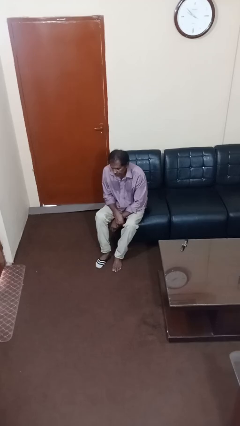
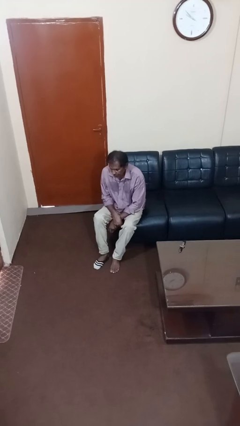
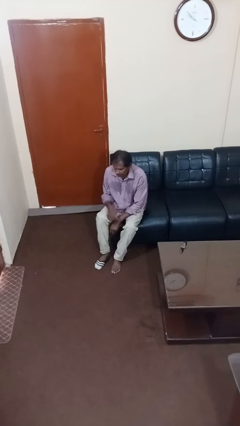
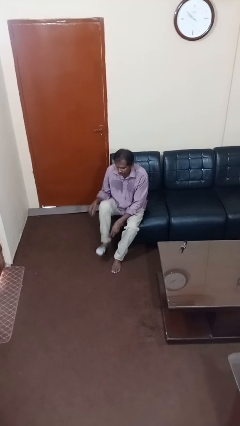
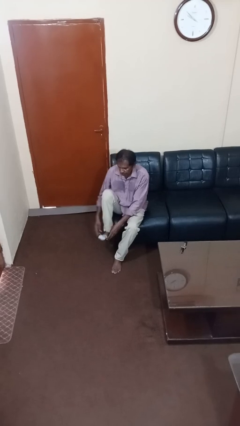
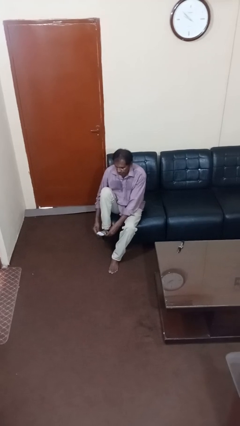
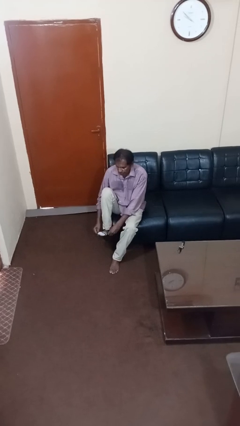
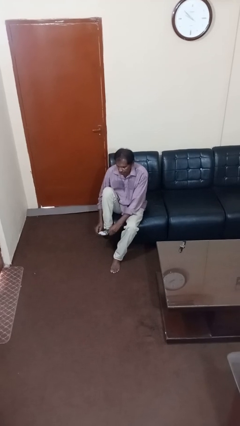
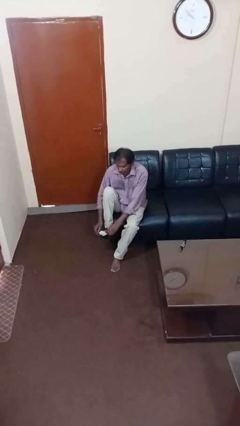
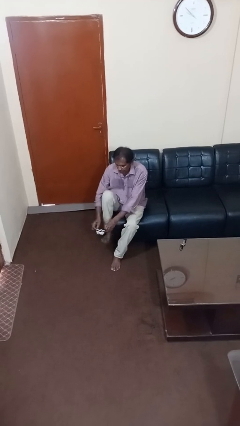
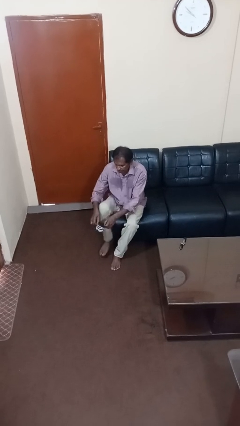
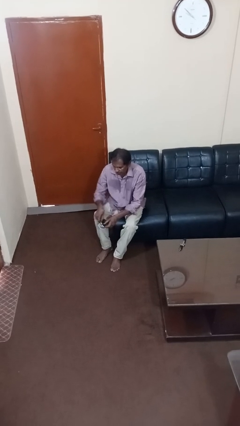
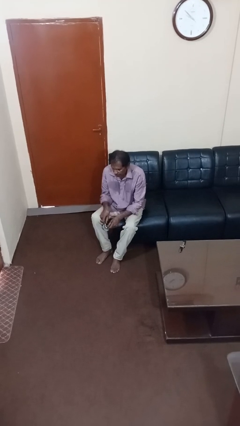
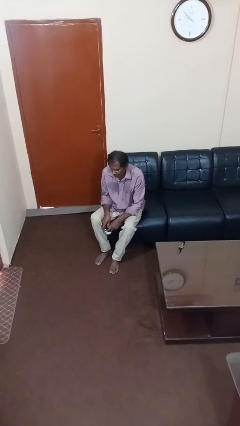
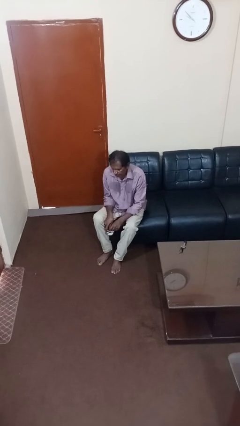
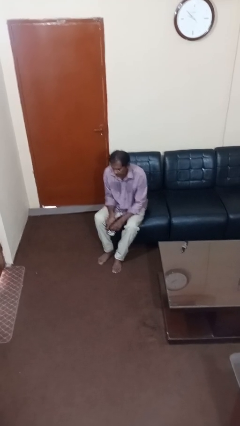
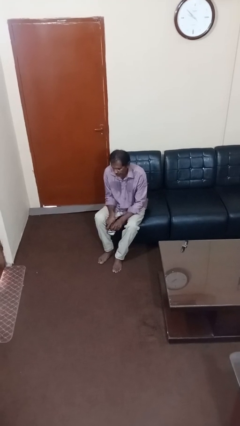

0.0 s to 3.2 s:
person takes off socks

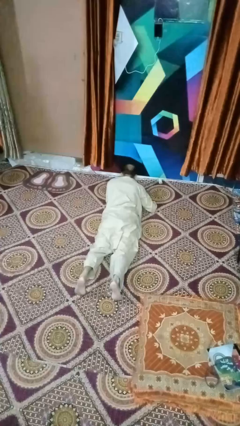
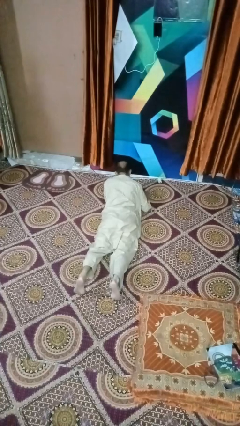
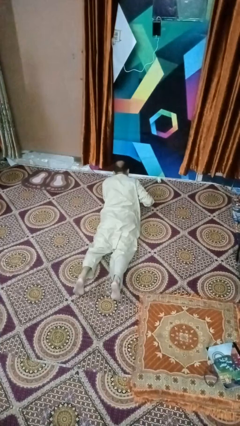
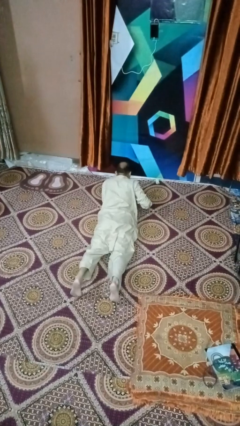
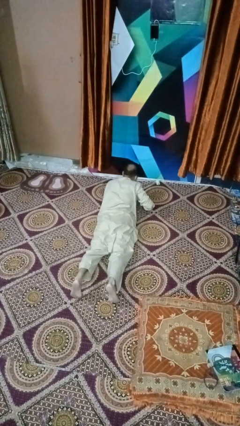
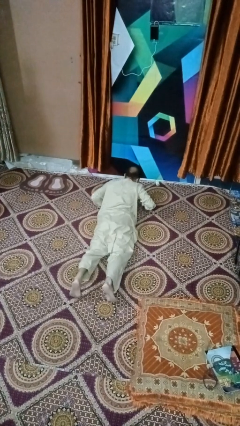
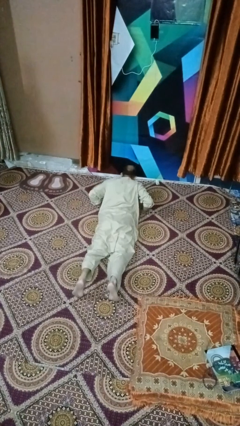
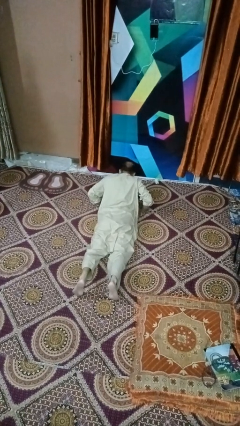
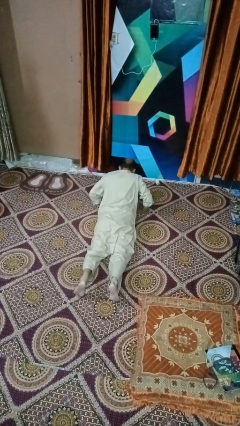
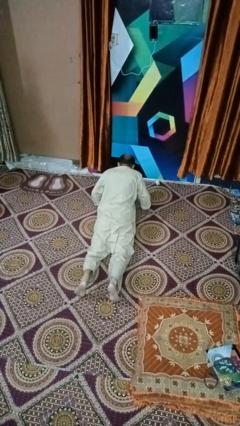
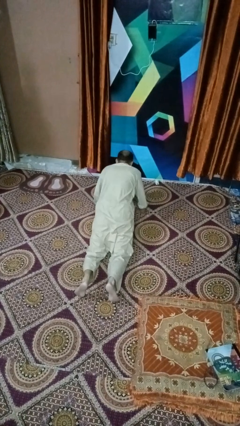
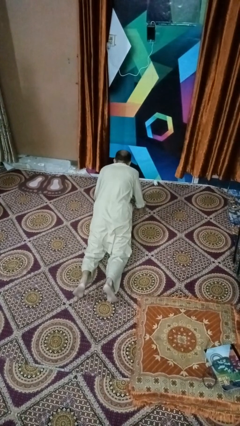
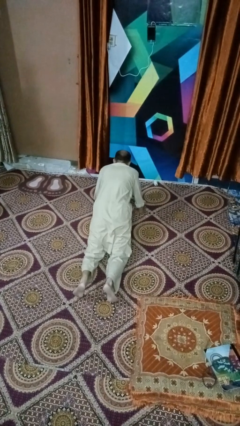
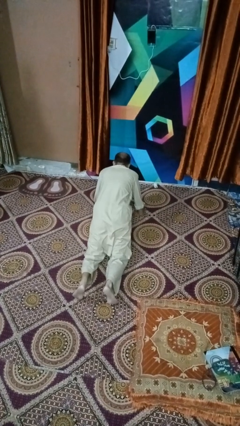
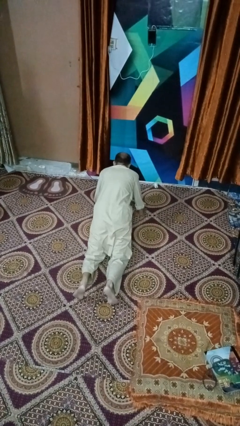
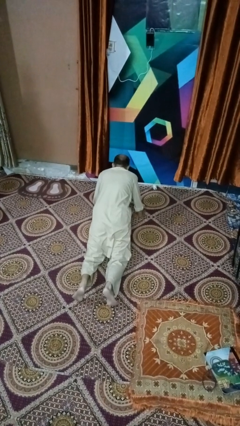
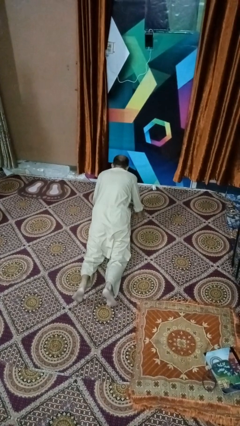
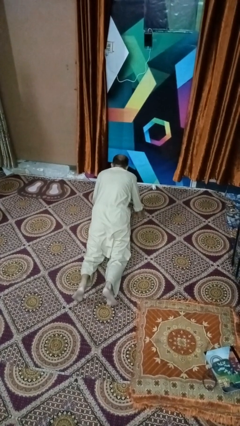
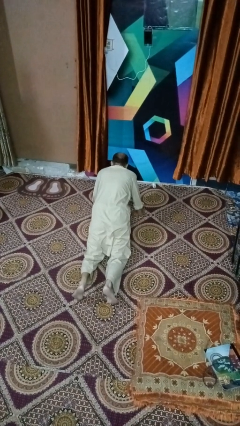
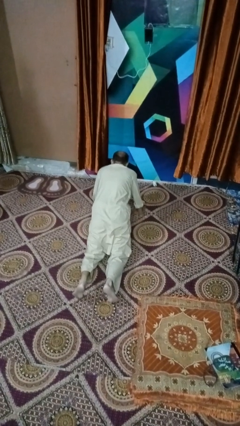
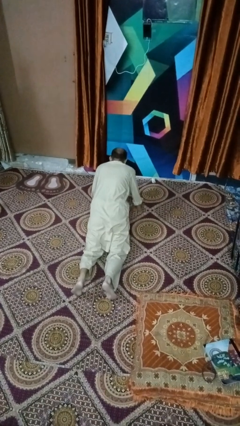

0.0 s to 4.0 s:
person exercises with situp

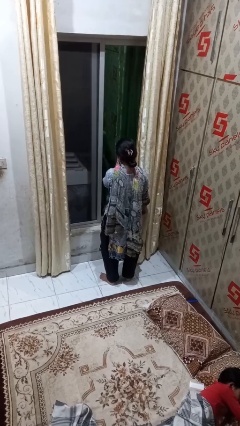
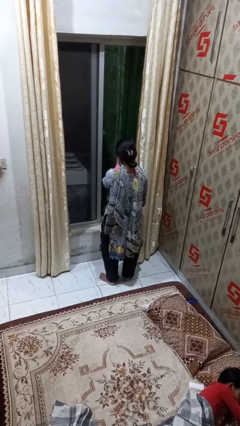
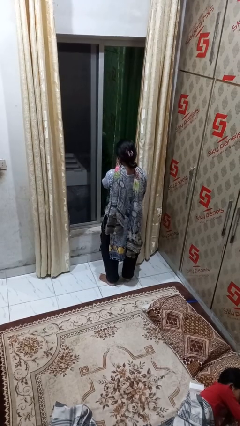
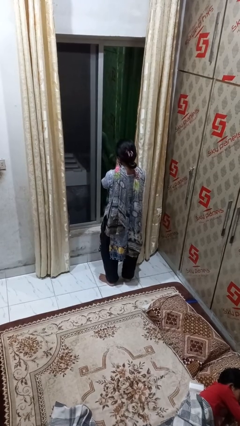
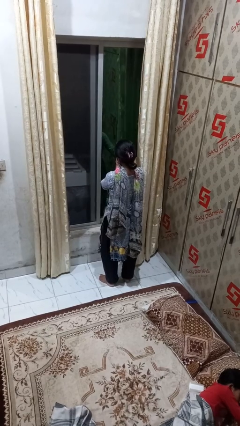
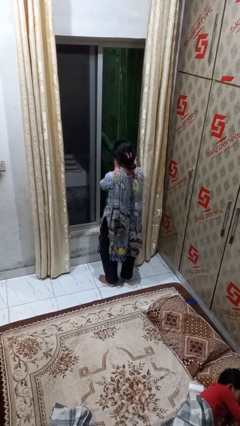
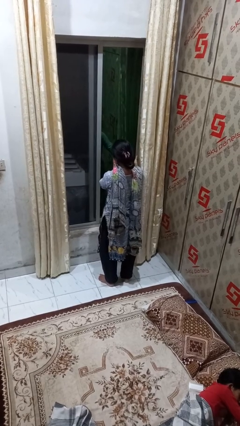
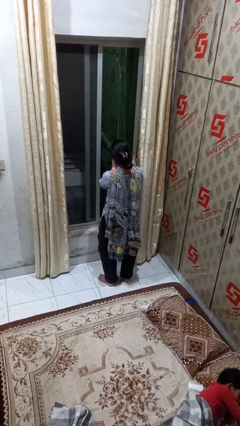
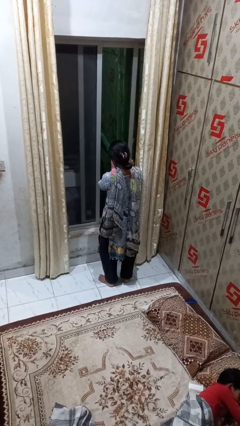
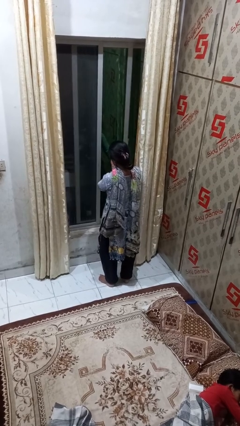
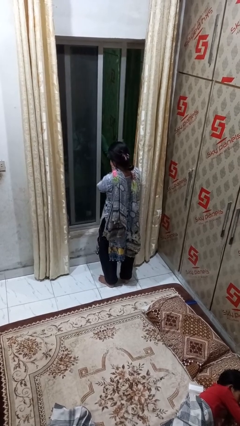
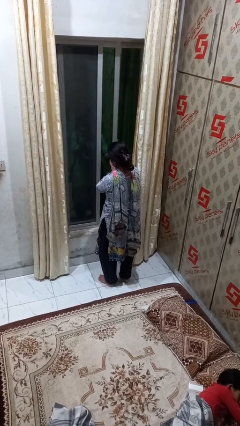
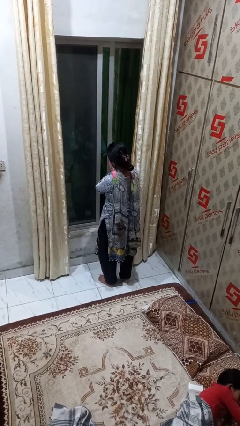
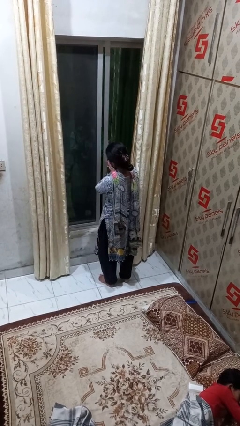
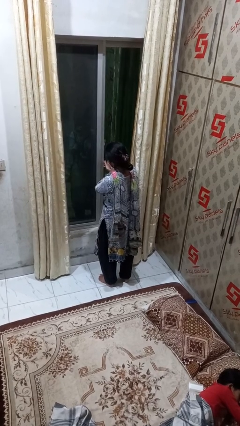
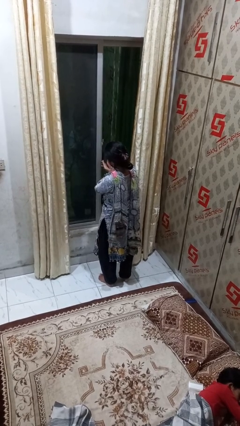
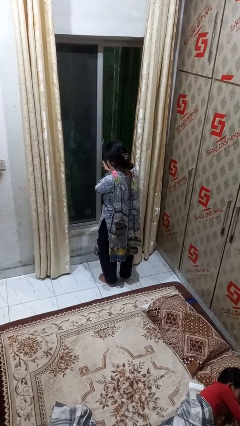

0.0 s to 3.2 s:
person closes home window

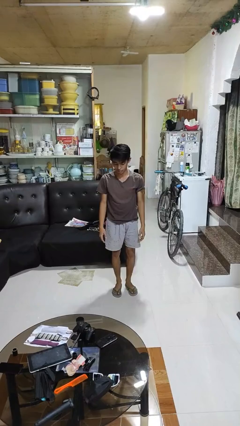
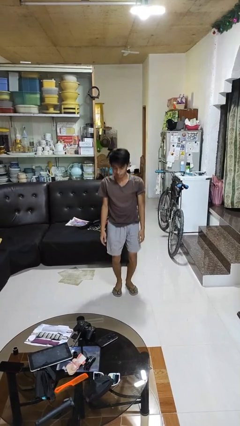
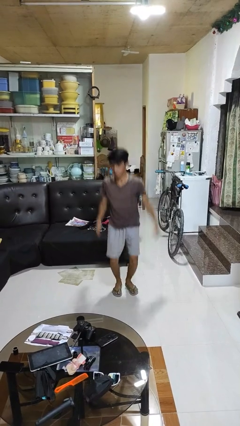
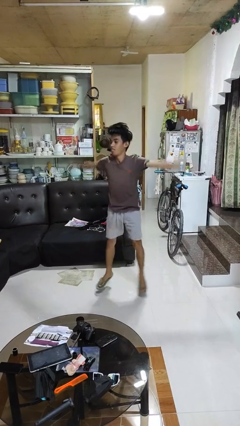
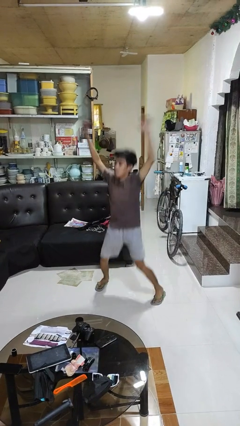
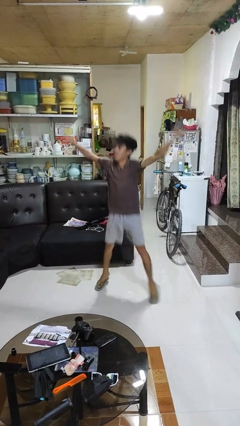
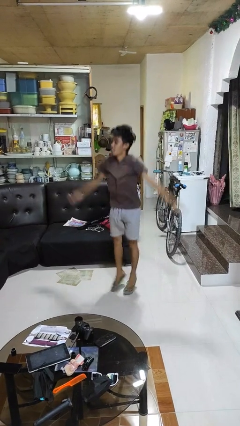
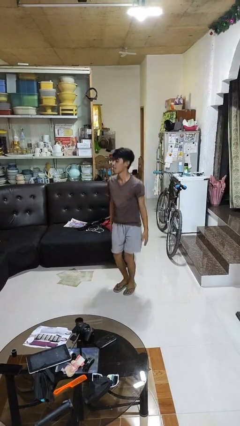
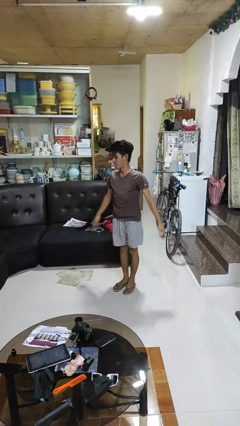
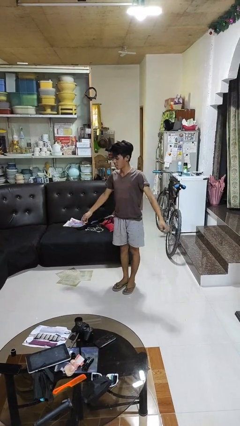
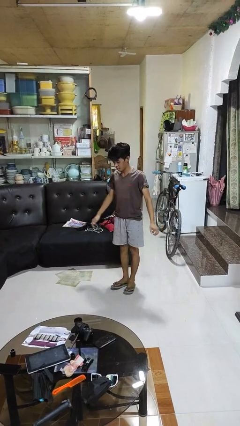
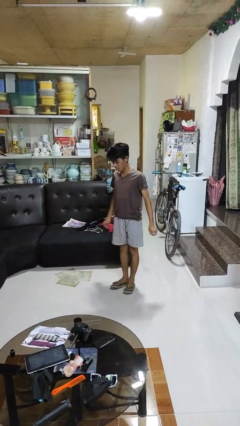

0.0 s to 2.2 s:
person exercises with jumping jacks

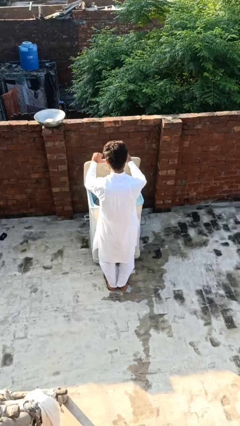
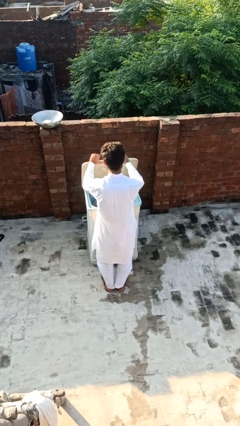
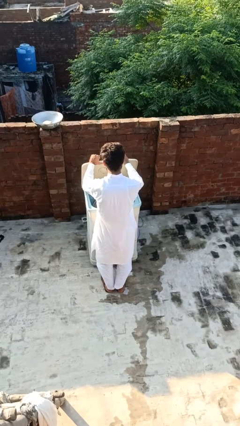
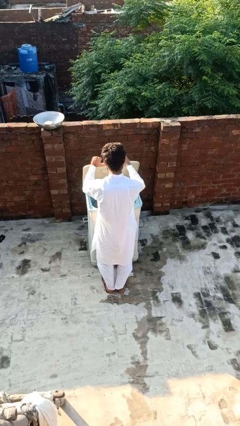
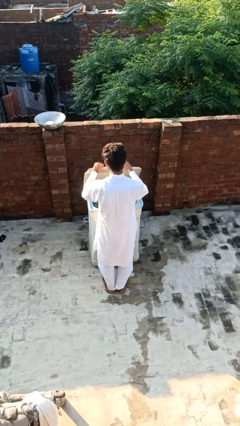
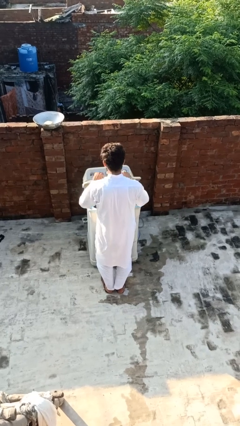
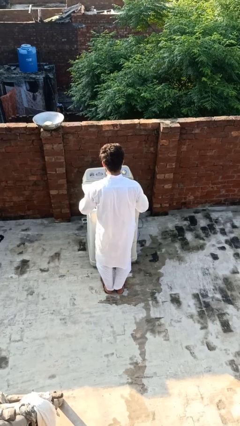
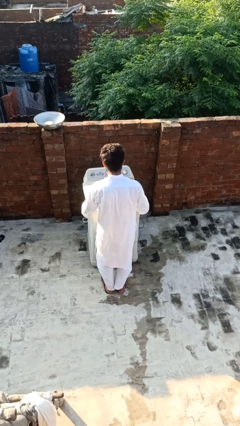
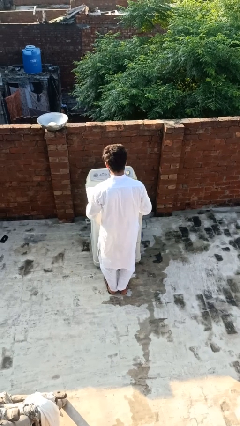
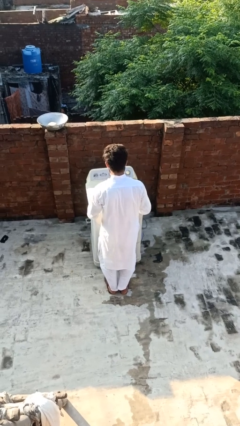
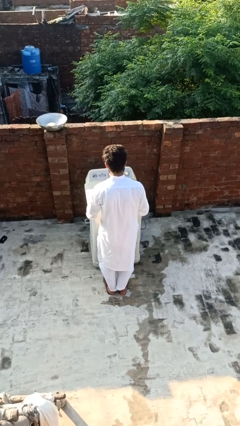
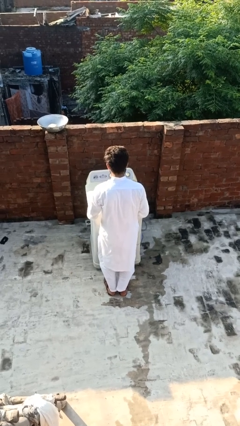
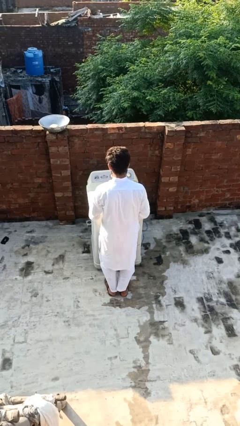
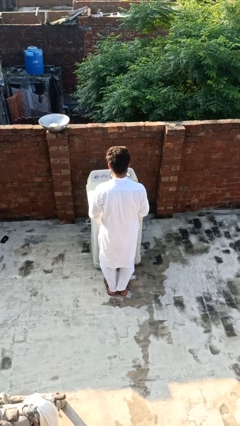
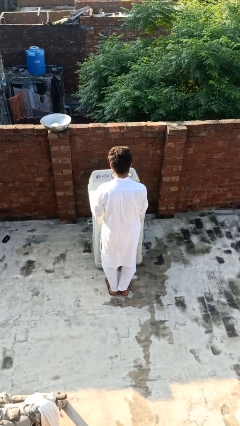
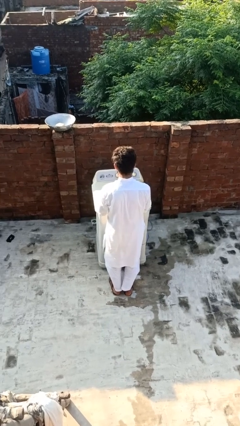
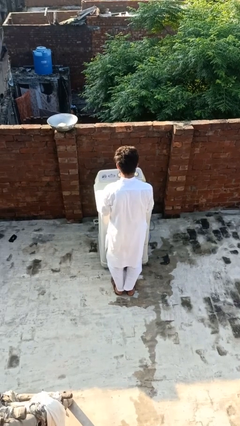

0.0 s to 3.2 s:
person closes clothes washer

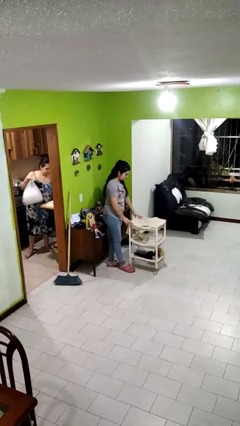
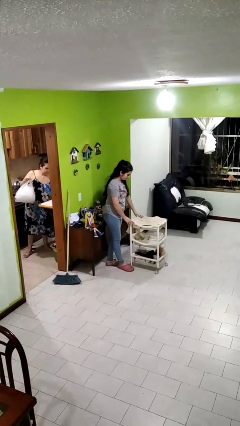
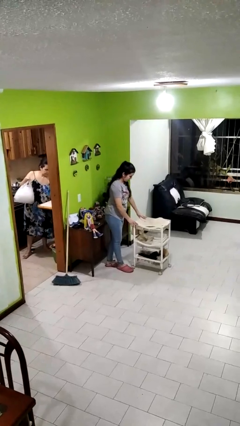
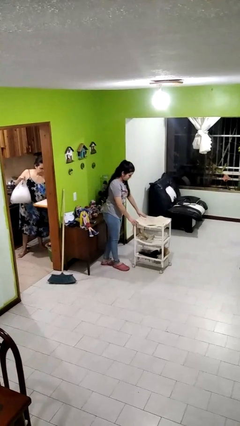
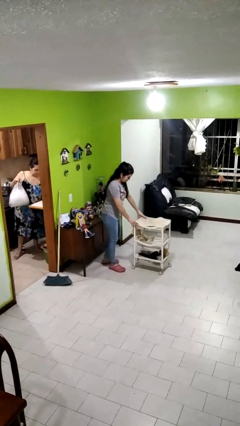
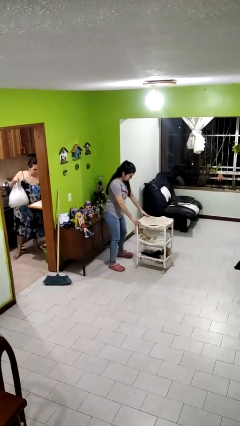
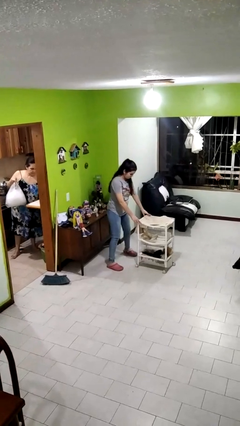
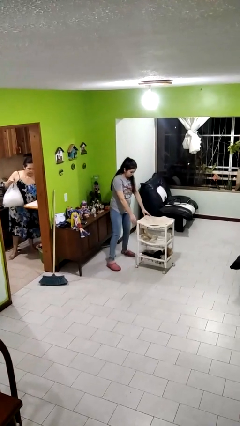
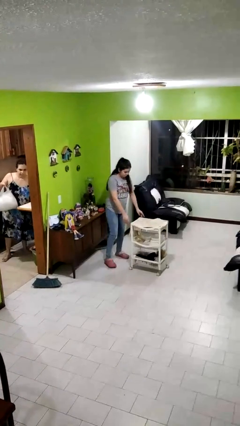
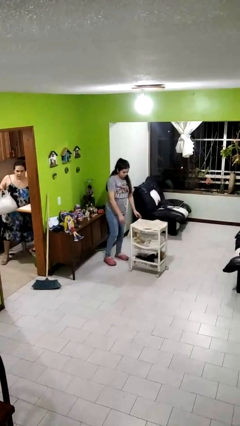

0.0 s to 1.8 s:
person pushes wheeled cart
